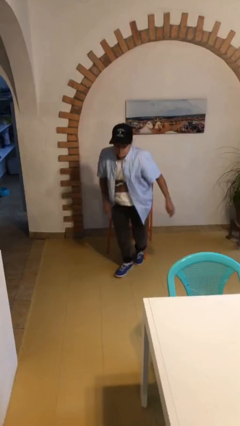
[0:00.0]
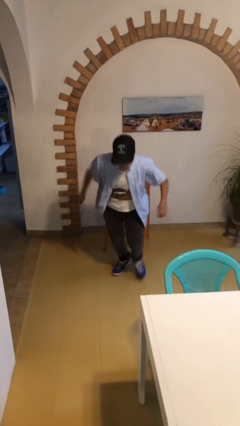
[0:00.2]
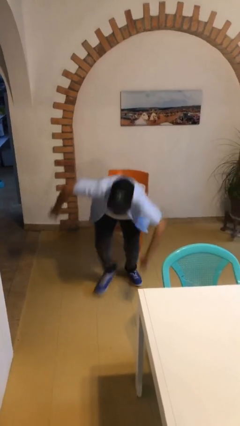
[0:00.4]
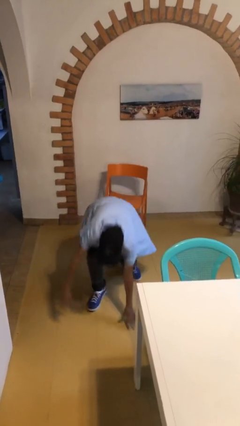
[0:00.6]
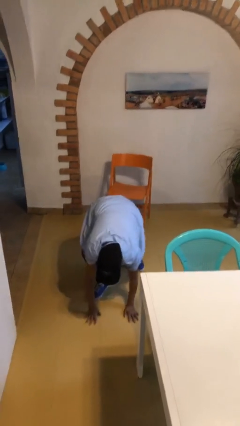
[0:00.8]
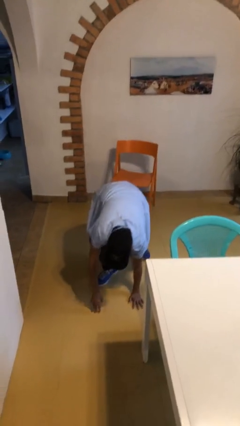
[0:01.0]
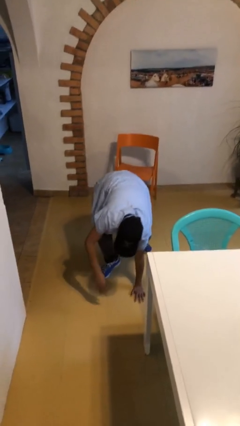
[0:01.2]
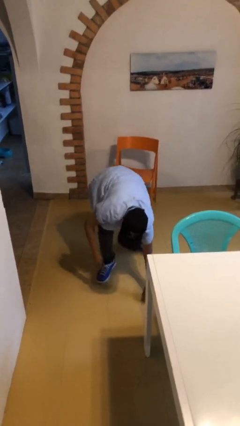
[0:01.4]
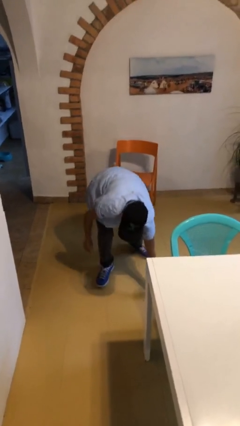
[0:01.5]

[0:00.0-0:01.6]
person falls from chair

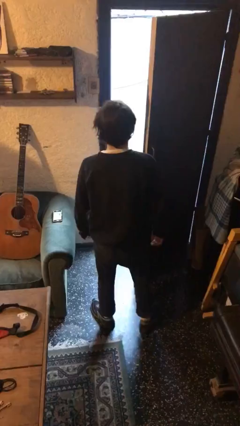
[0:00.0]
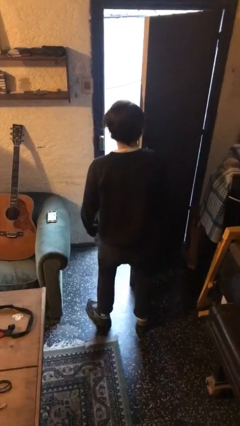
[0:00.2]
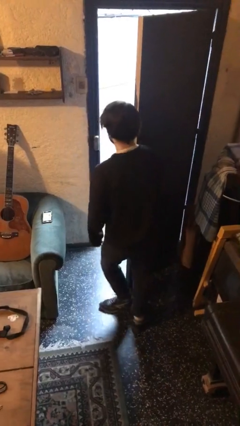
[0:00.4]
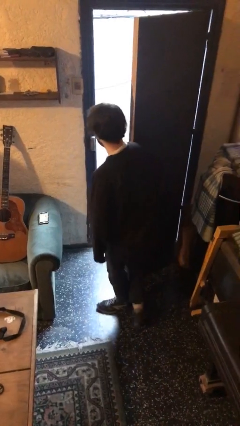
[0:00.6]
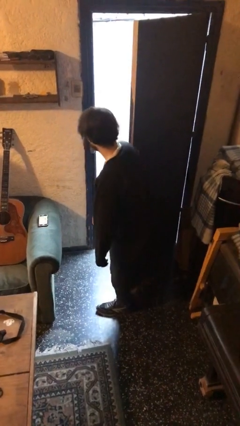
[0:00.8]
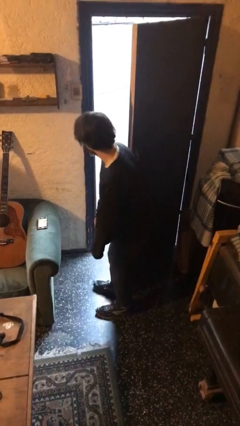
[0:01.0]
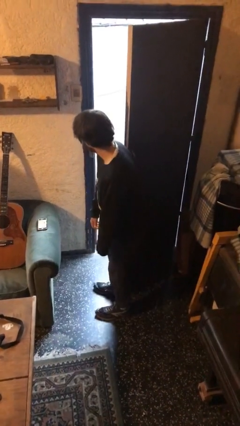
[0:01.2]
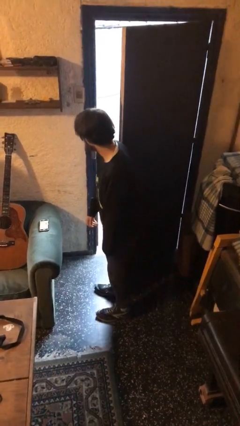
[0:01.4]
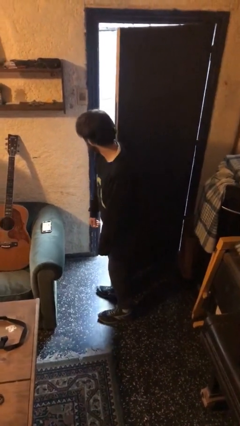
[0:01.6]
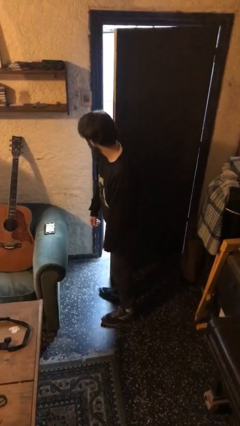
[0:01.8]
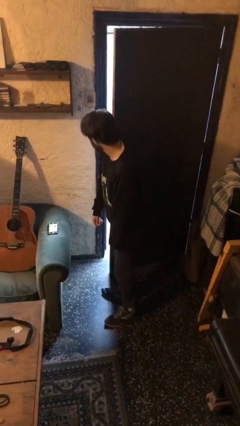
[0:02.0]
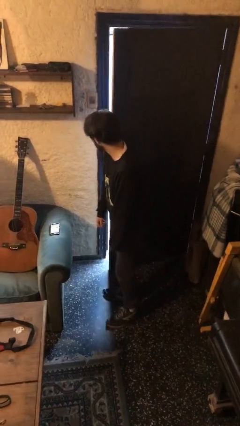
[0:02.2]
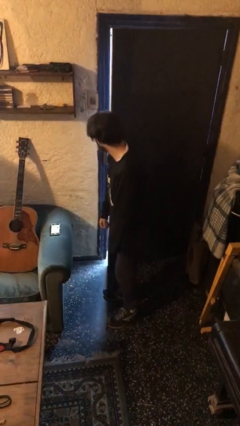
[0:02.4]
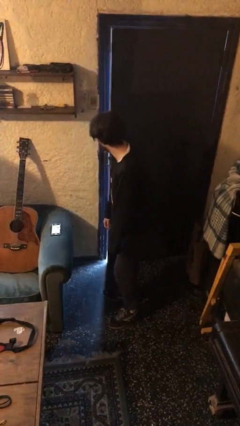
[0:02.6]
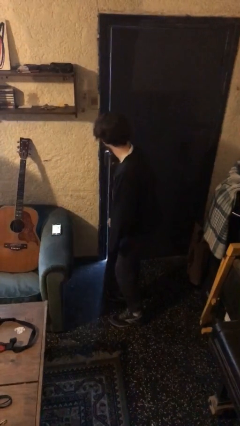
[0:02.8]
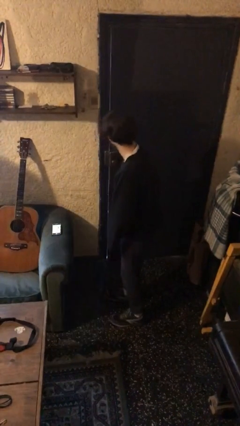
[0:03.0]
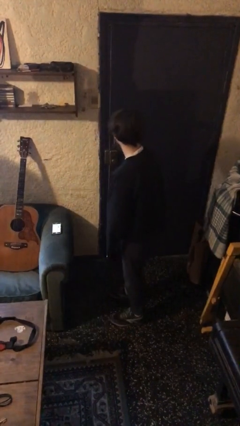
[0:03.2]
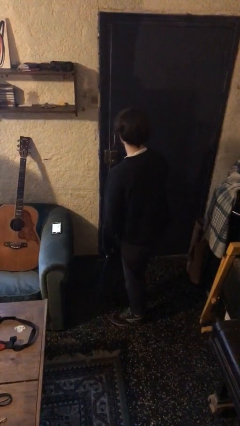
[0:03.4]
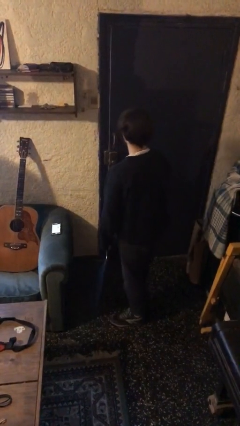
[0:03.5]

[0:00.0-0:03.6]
person closes door with hip

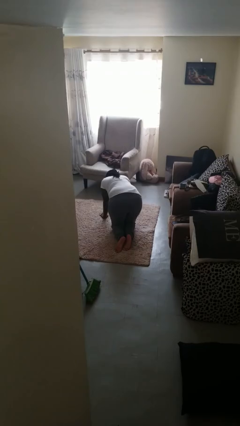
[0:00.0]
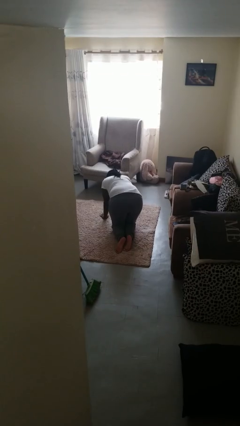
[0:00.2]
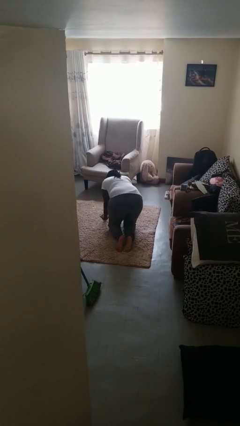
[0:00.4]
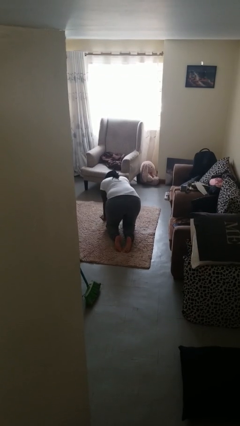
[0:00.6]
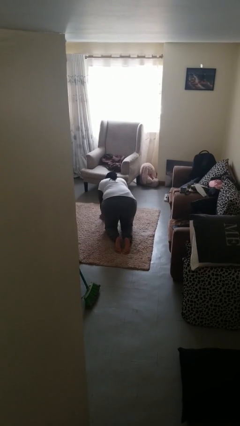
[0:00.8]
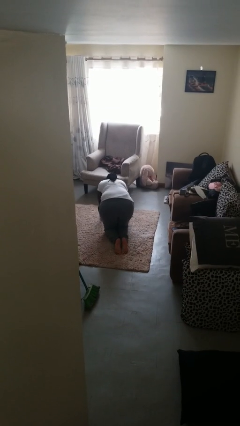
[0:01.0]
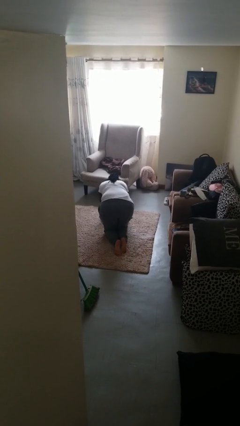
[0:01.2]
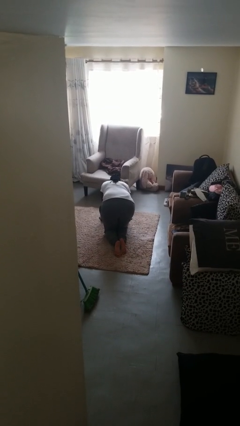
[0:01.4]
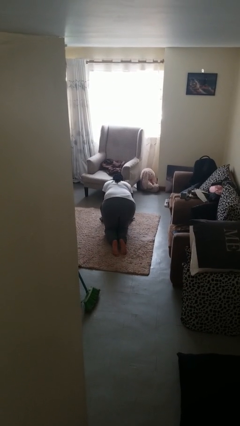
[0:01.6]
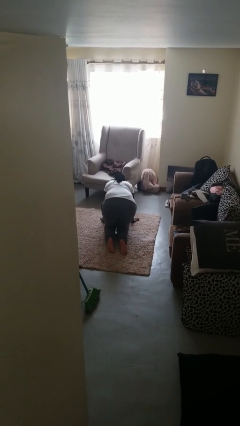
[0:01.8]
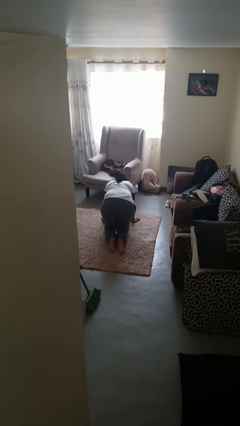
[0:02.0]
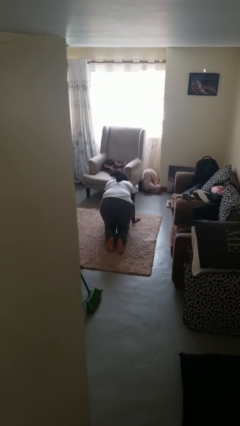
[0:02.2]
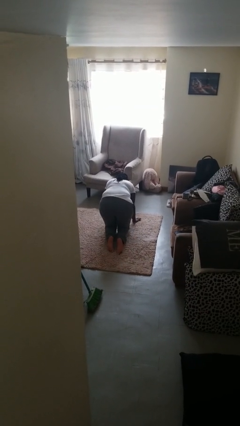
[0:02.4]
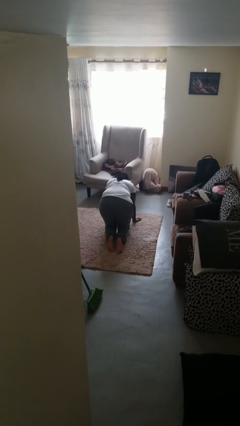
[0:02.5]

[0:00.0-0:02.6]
person crawls

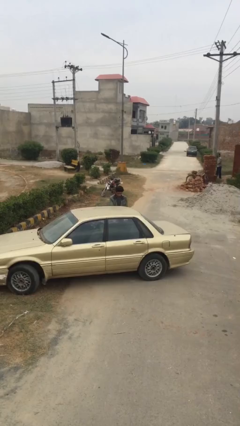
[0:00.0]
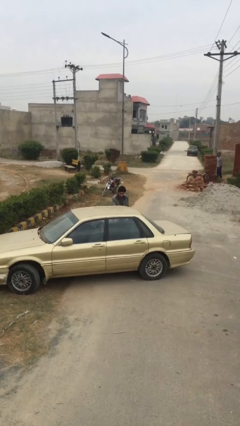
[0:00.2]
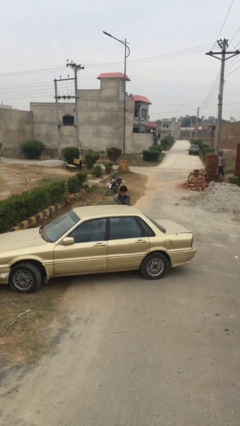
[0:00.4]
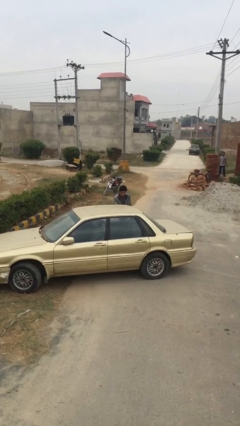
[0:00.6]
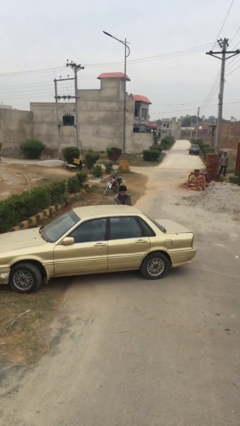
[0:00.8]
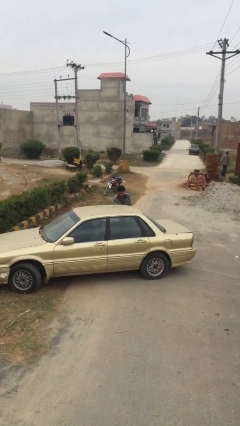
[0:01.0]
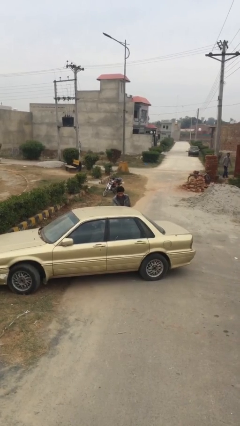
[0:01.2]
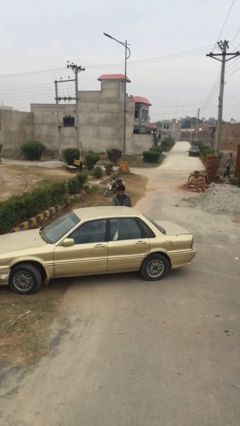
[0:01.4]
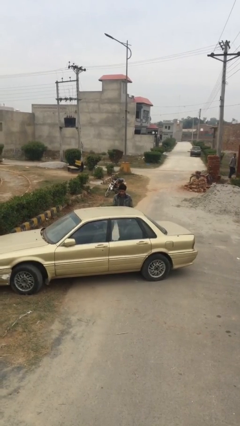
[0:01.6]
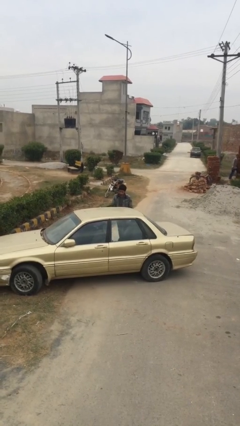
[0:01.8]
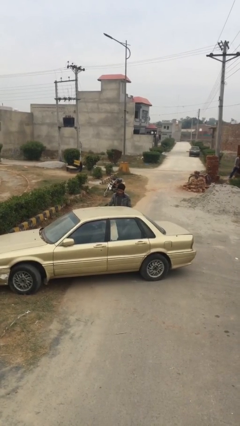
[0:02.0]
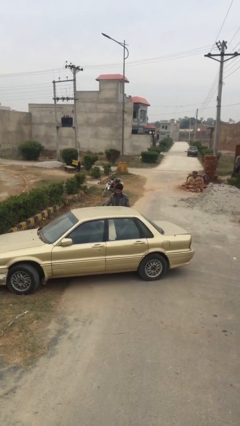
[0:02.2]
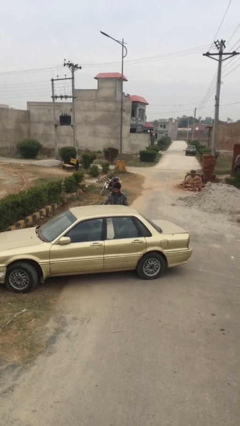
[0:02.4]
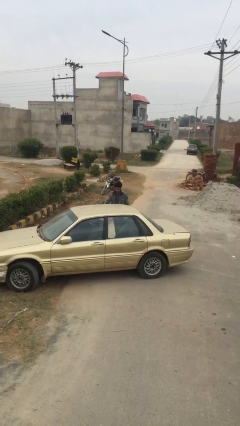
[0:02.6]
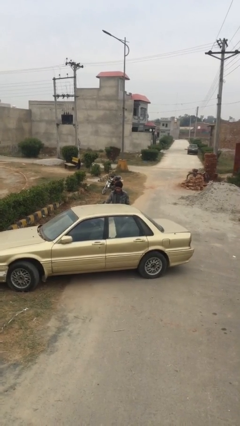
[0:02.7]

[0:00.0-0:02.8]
person opens car door

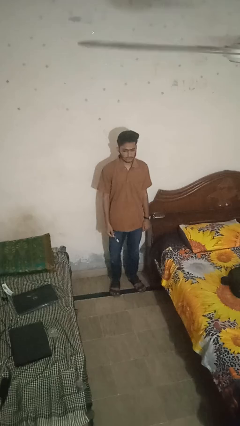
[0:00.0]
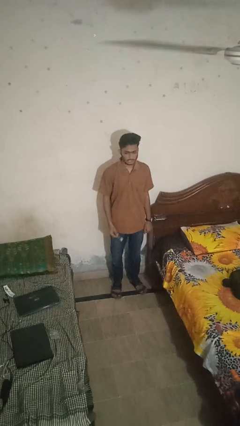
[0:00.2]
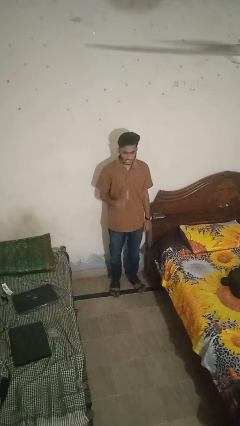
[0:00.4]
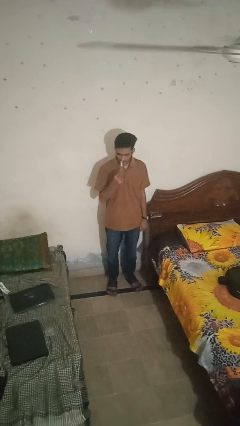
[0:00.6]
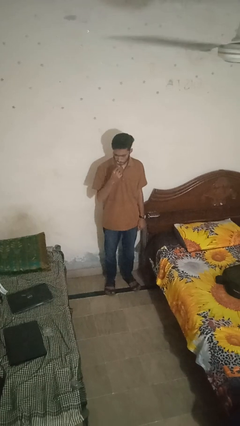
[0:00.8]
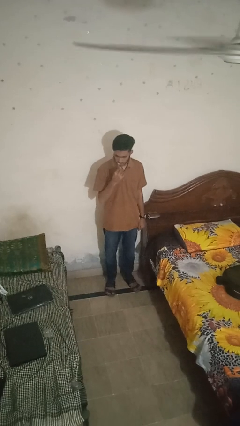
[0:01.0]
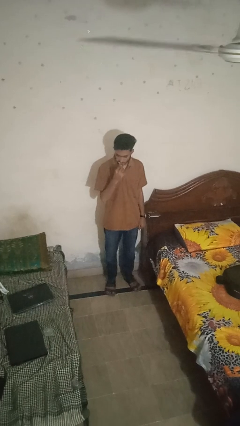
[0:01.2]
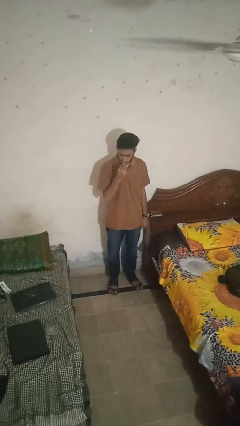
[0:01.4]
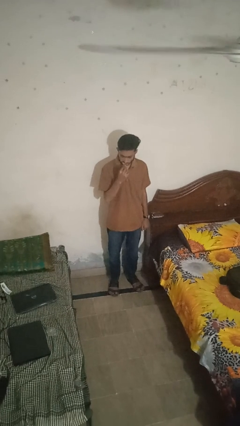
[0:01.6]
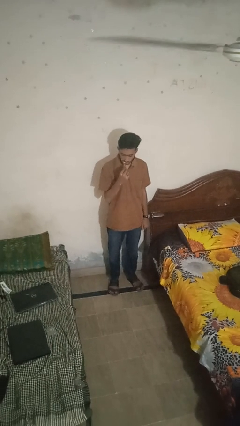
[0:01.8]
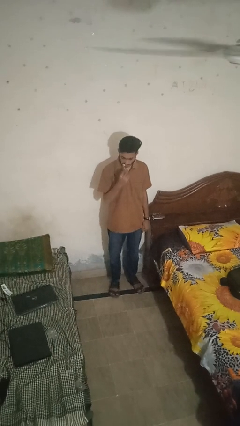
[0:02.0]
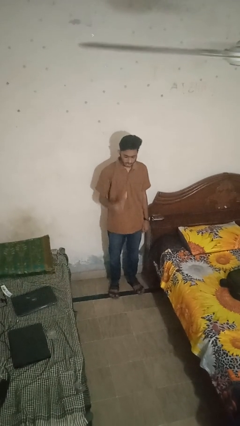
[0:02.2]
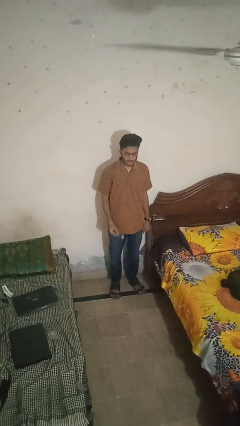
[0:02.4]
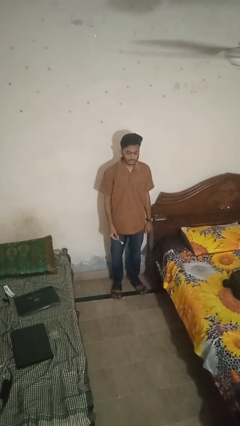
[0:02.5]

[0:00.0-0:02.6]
person brushes teeth

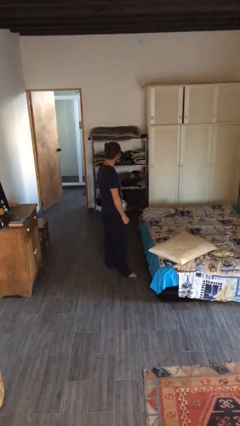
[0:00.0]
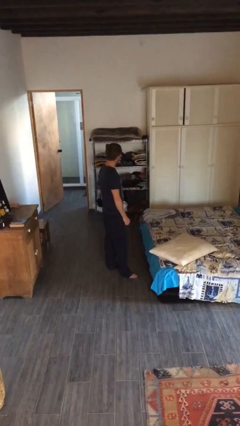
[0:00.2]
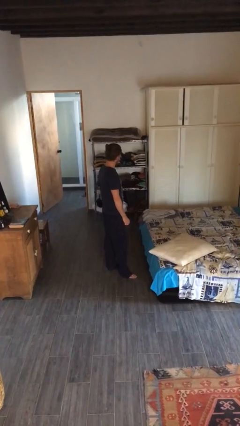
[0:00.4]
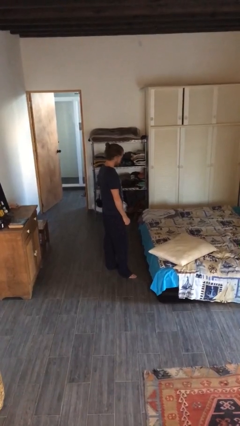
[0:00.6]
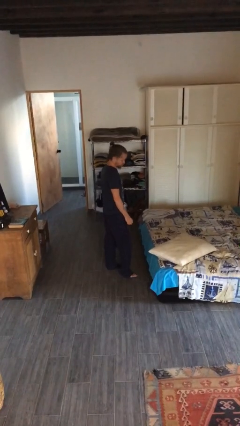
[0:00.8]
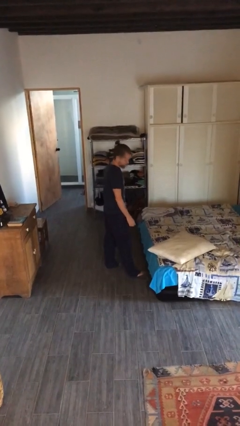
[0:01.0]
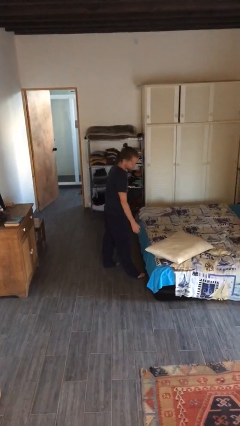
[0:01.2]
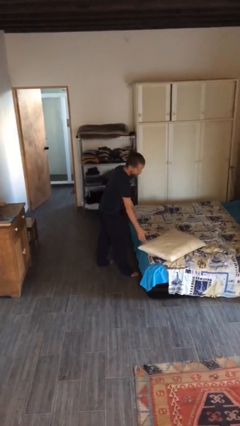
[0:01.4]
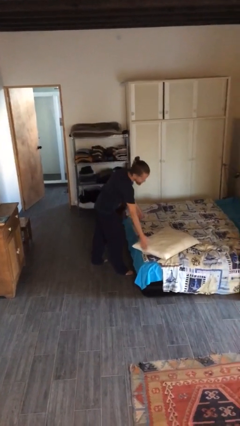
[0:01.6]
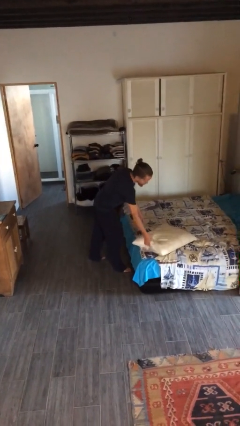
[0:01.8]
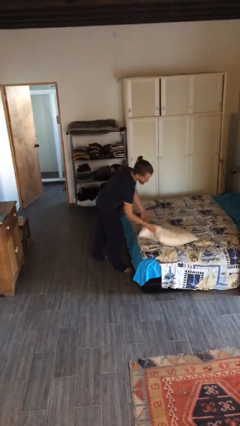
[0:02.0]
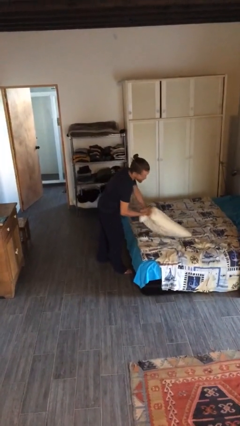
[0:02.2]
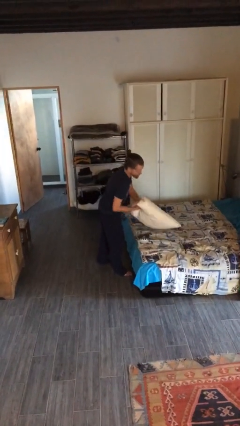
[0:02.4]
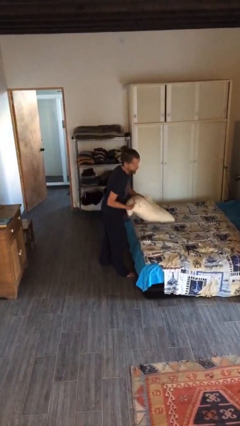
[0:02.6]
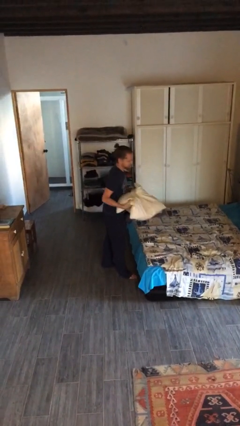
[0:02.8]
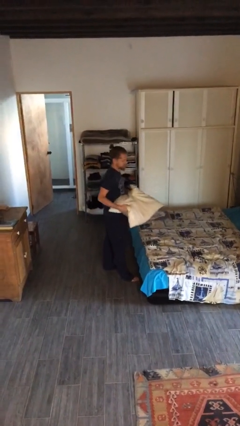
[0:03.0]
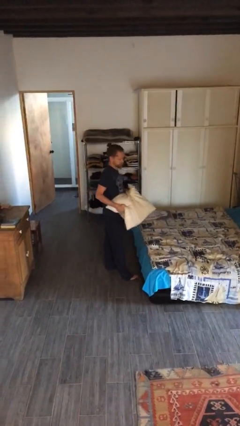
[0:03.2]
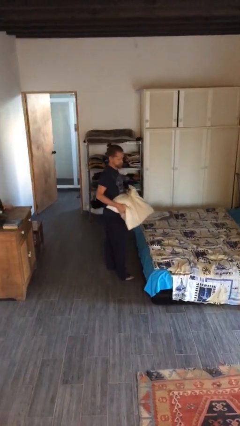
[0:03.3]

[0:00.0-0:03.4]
person picks up object from bed

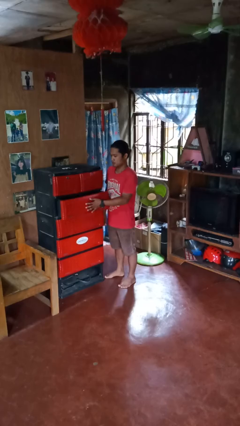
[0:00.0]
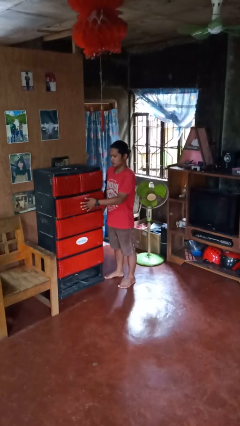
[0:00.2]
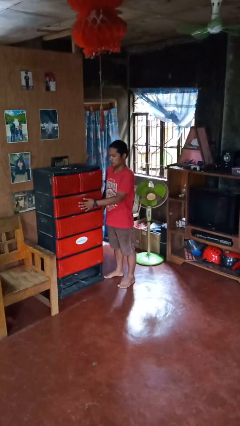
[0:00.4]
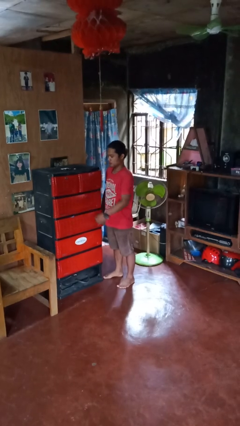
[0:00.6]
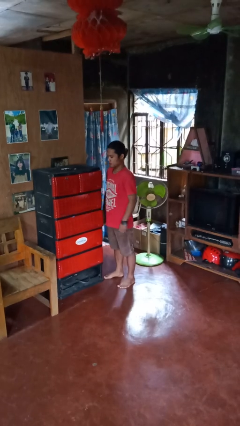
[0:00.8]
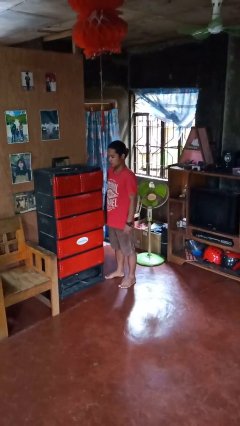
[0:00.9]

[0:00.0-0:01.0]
person closes dresser drawer
